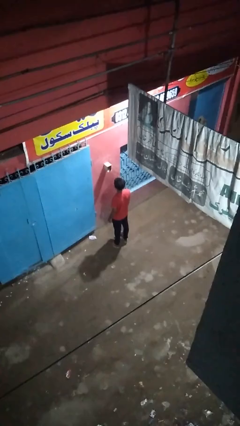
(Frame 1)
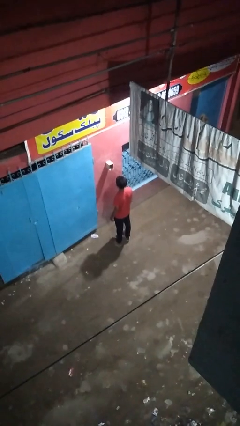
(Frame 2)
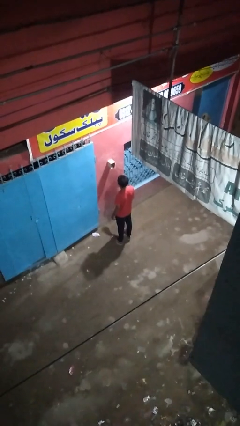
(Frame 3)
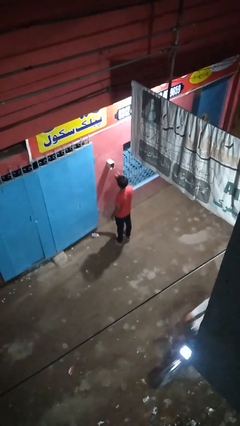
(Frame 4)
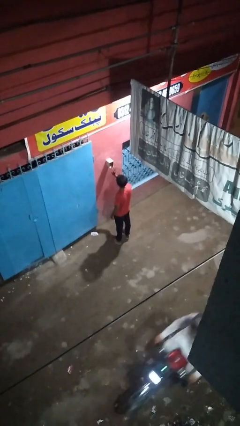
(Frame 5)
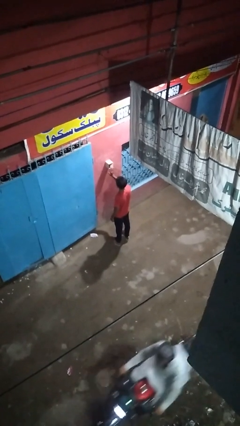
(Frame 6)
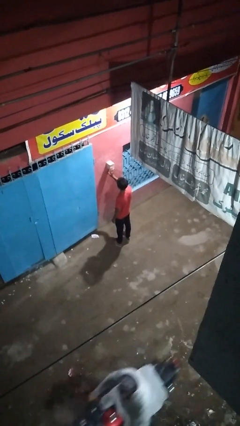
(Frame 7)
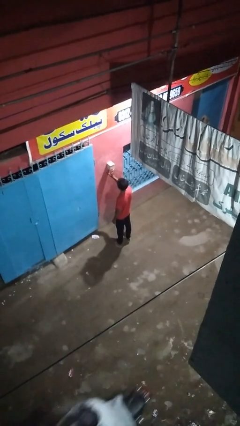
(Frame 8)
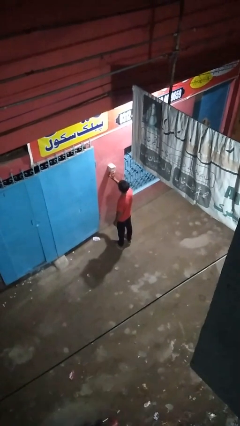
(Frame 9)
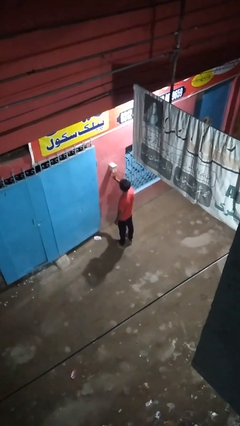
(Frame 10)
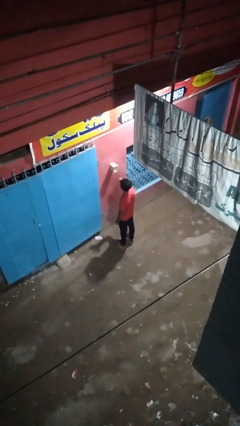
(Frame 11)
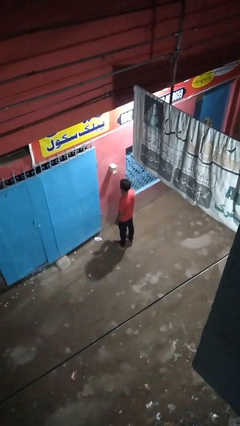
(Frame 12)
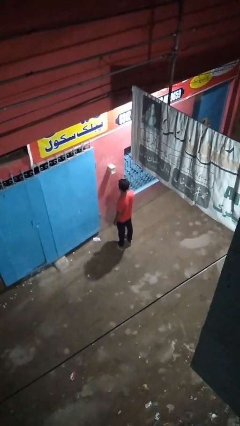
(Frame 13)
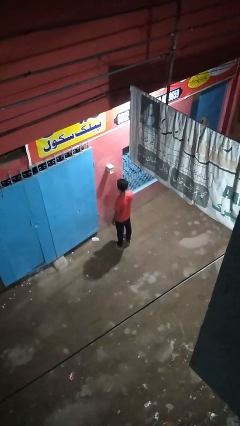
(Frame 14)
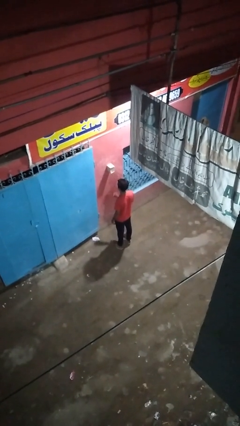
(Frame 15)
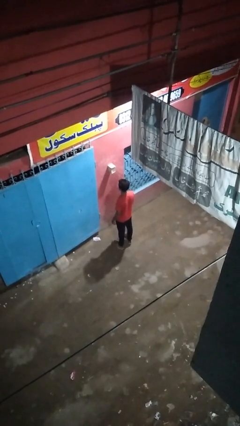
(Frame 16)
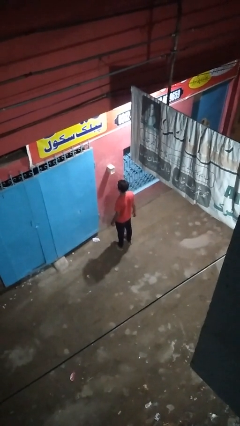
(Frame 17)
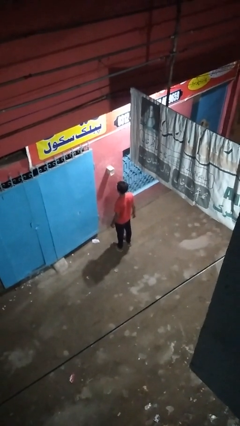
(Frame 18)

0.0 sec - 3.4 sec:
person closes mailbox

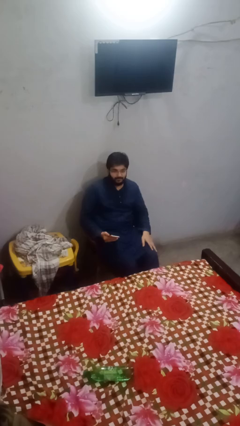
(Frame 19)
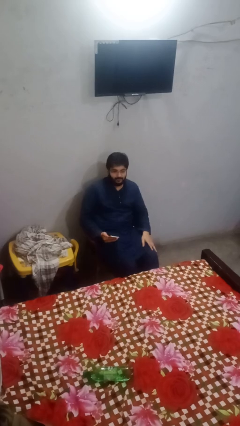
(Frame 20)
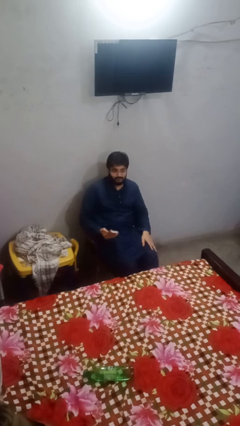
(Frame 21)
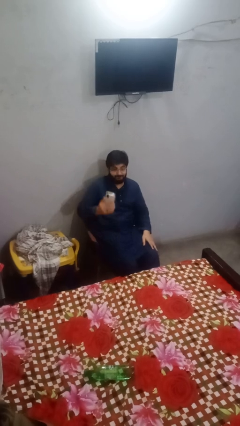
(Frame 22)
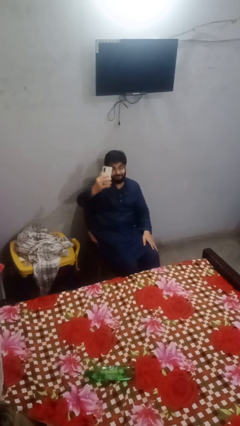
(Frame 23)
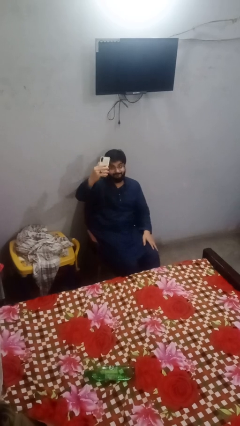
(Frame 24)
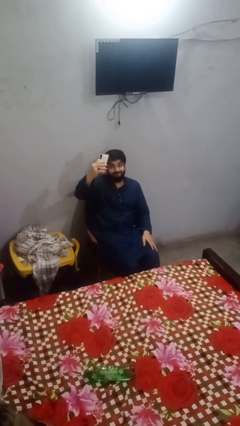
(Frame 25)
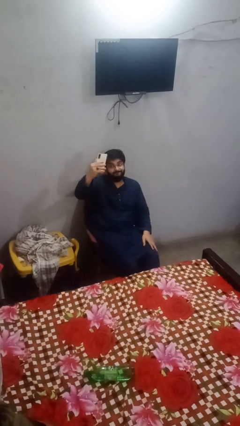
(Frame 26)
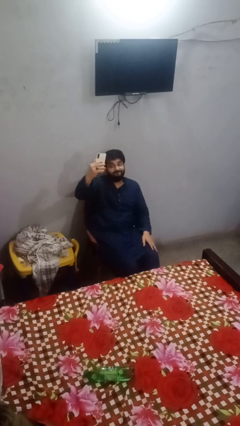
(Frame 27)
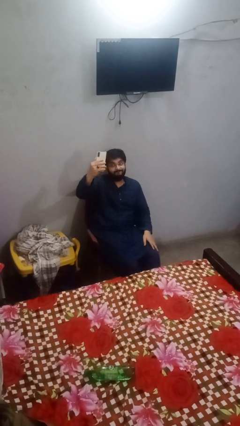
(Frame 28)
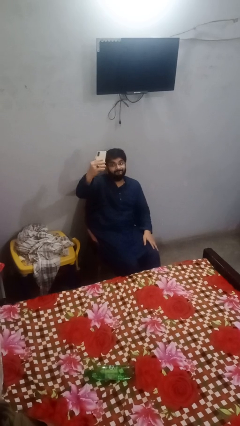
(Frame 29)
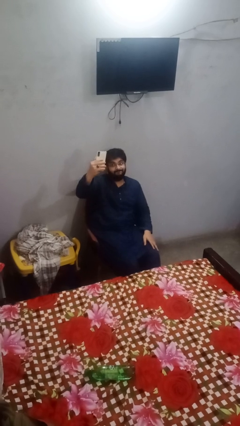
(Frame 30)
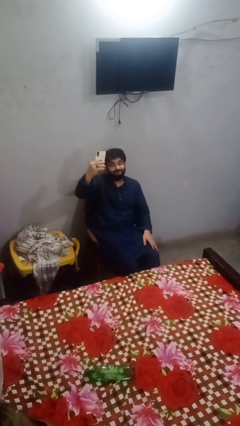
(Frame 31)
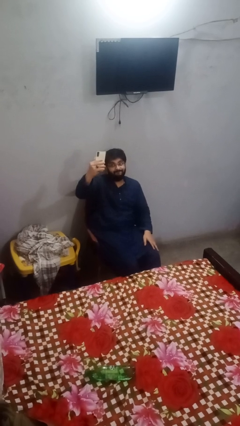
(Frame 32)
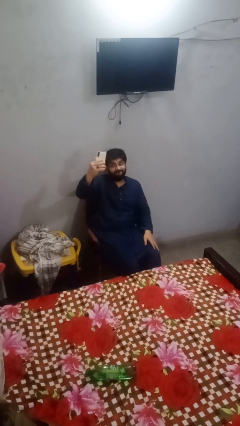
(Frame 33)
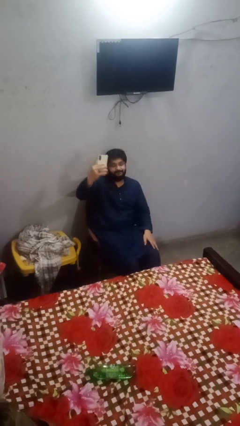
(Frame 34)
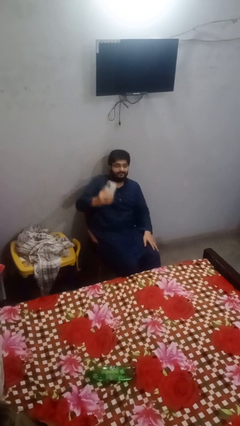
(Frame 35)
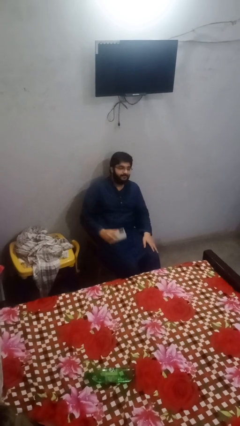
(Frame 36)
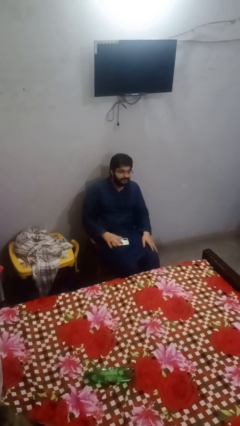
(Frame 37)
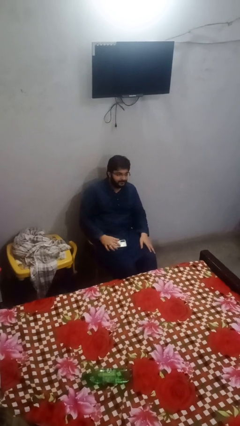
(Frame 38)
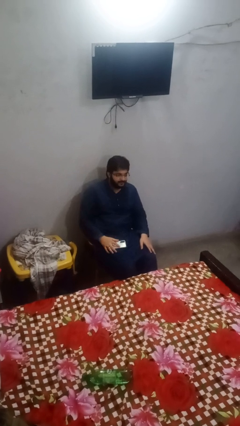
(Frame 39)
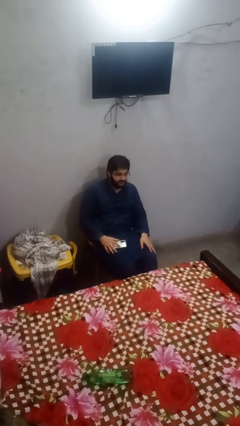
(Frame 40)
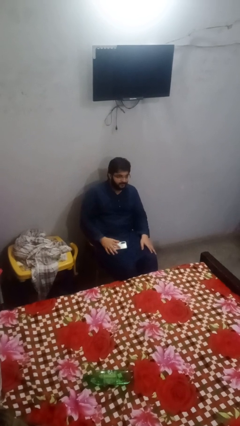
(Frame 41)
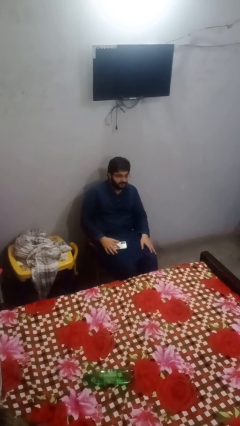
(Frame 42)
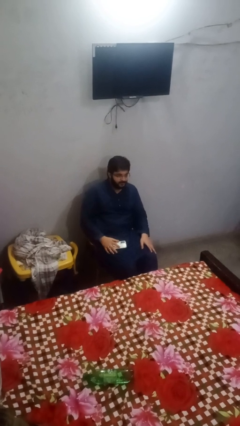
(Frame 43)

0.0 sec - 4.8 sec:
person takes selfie

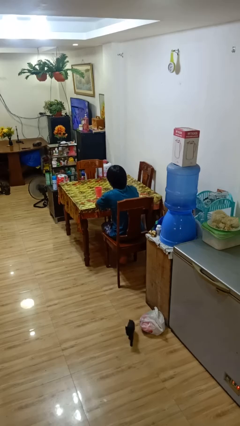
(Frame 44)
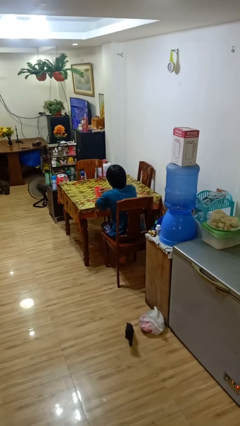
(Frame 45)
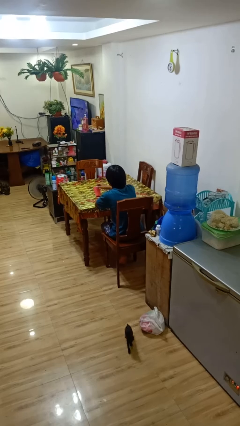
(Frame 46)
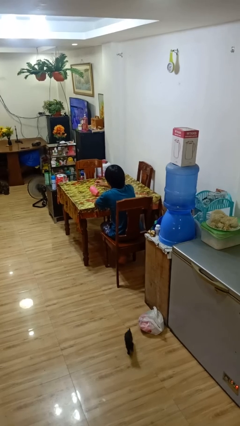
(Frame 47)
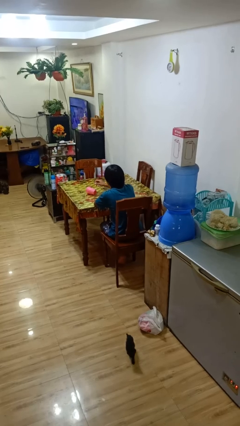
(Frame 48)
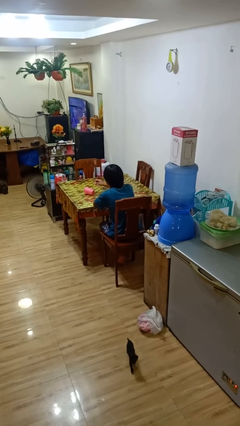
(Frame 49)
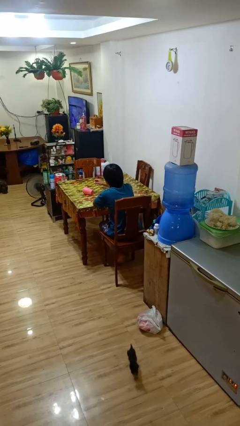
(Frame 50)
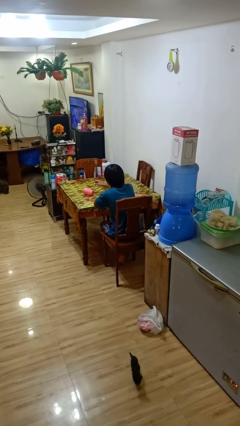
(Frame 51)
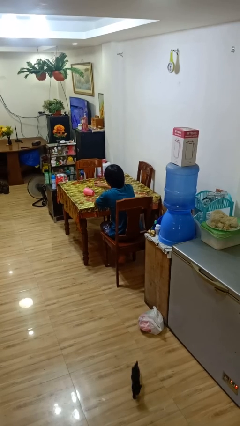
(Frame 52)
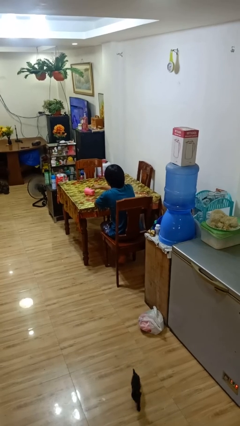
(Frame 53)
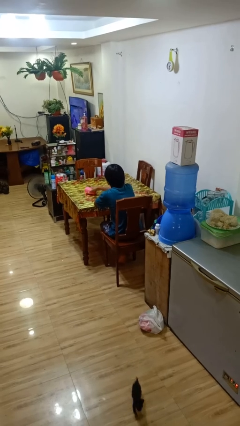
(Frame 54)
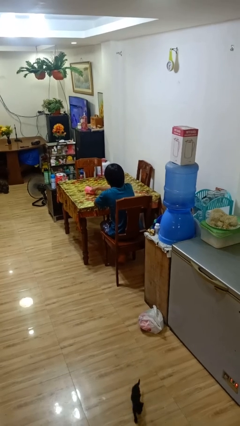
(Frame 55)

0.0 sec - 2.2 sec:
person knocks over glass

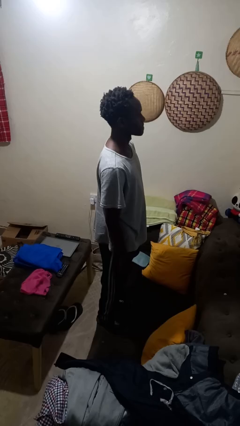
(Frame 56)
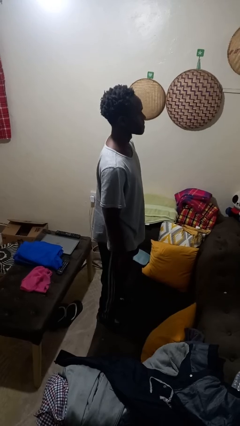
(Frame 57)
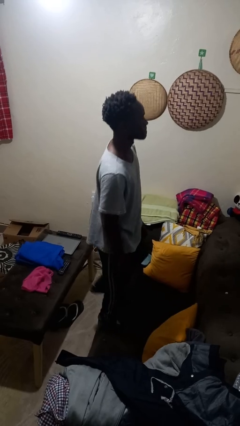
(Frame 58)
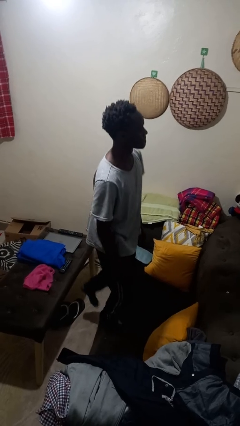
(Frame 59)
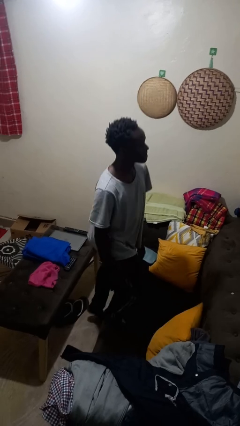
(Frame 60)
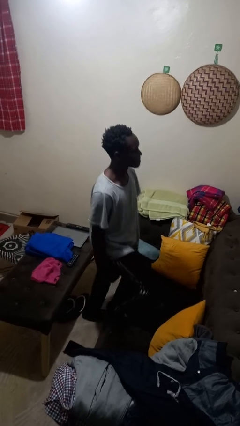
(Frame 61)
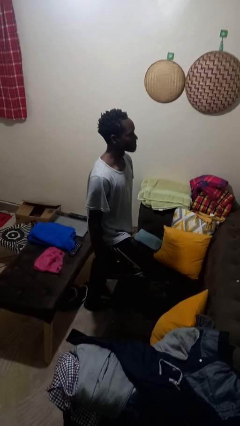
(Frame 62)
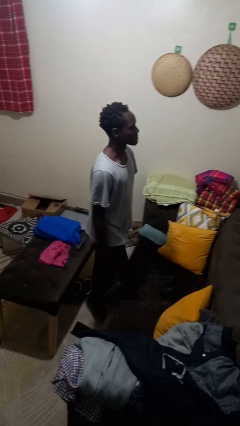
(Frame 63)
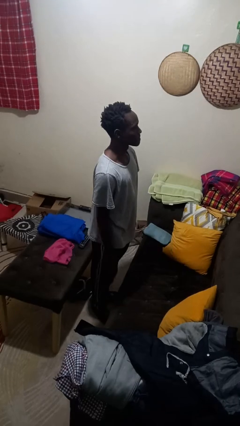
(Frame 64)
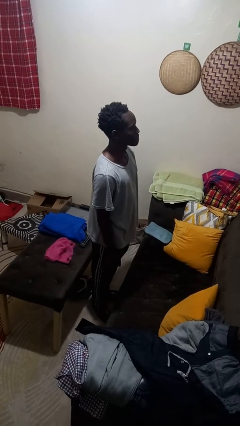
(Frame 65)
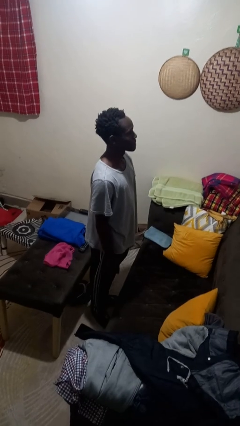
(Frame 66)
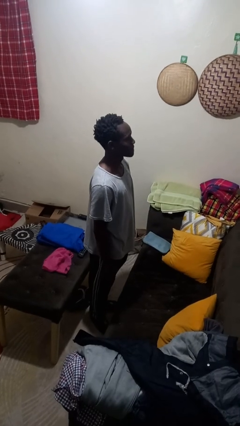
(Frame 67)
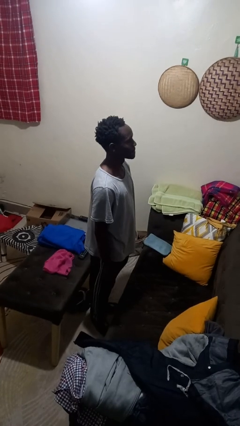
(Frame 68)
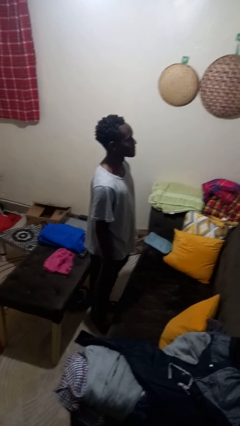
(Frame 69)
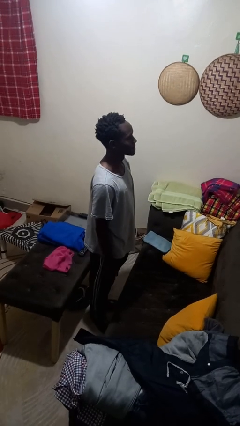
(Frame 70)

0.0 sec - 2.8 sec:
person climbs off couch

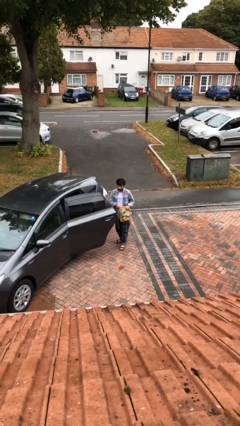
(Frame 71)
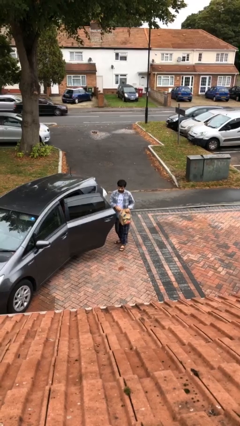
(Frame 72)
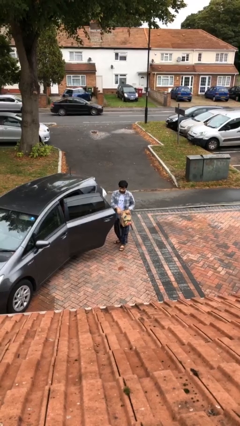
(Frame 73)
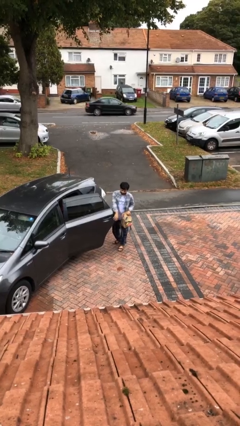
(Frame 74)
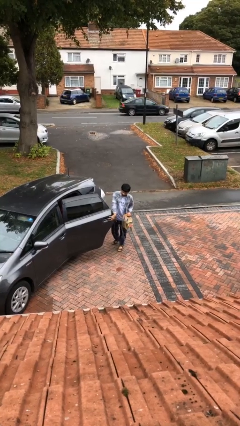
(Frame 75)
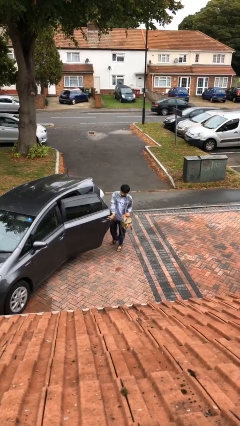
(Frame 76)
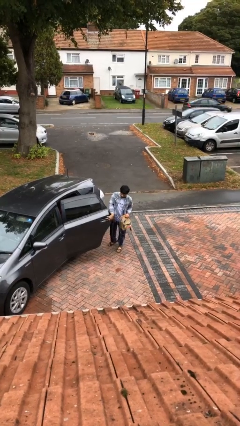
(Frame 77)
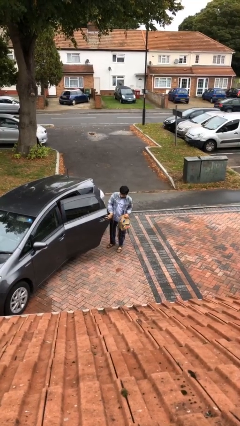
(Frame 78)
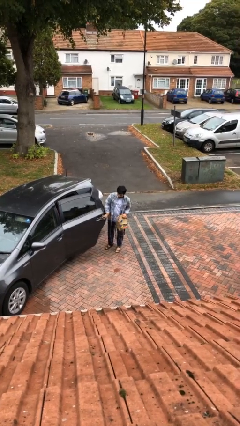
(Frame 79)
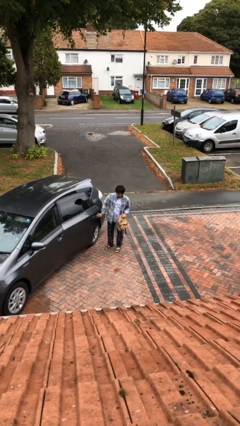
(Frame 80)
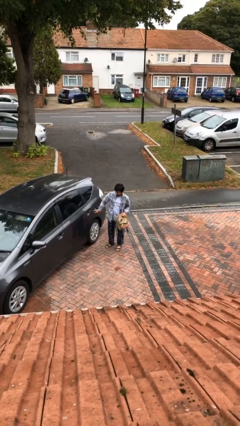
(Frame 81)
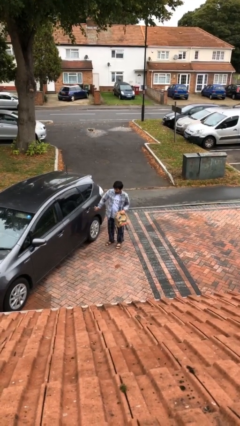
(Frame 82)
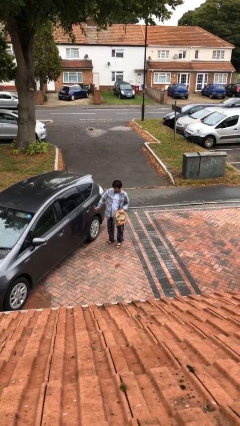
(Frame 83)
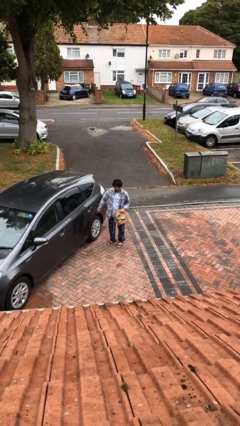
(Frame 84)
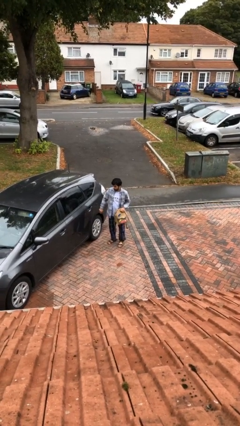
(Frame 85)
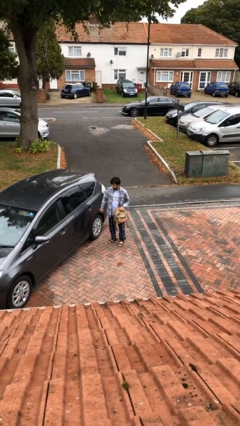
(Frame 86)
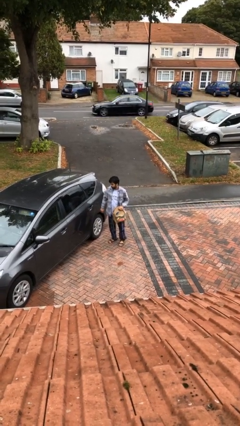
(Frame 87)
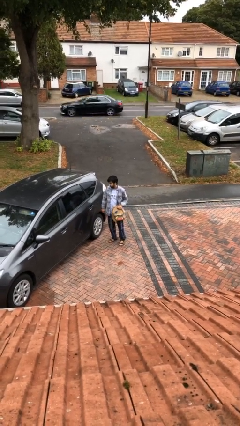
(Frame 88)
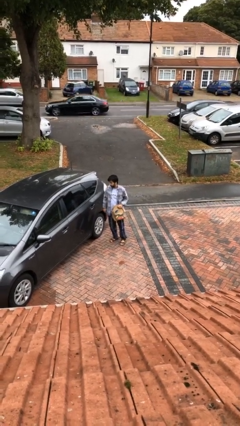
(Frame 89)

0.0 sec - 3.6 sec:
person closes car door

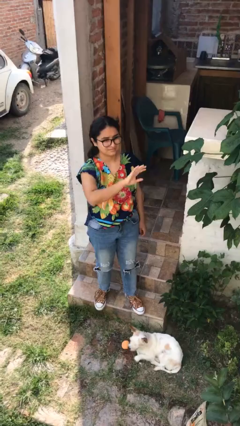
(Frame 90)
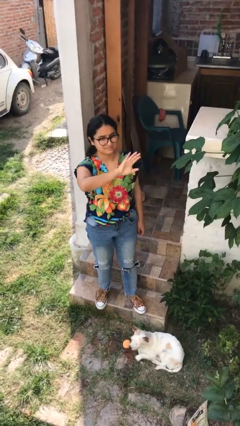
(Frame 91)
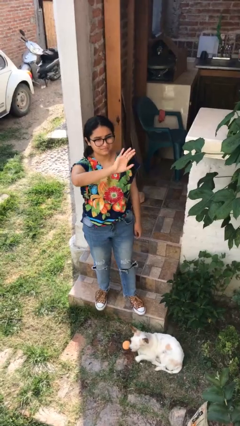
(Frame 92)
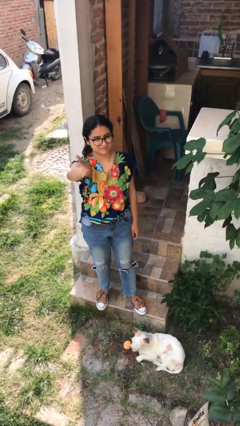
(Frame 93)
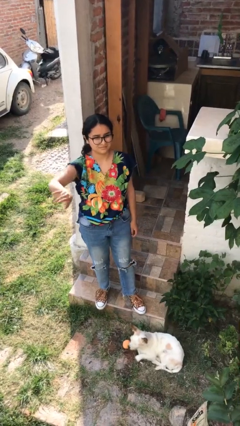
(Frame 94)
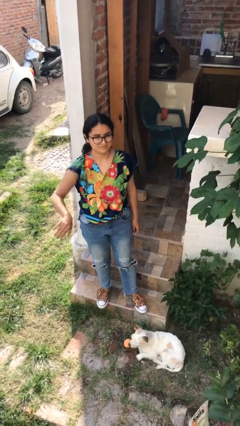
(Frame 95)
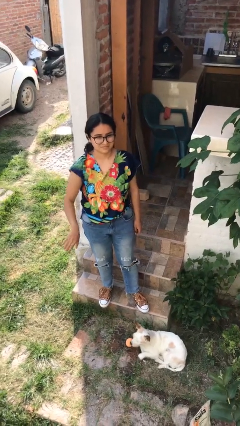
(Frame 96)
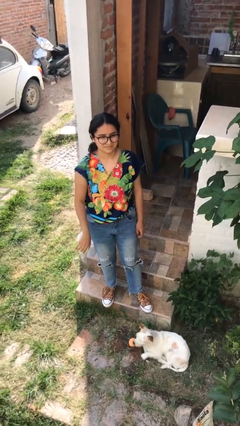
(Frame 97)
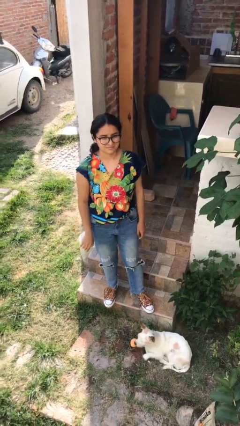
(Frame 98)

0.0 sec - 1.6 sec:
person gestures swipe right
